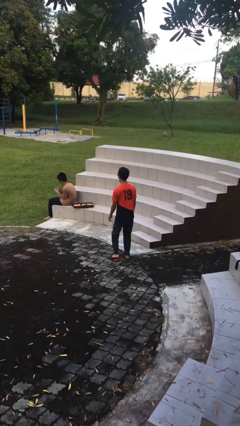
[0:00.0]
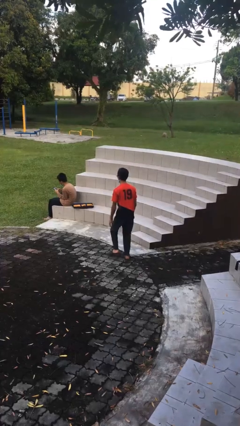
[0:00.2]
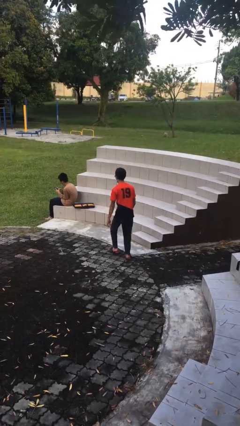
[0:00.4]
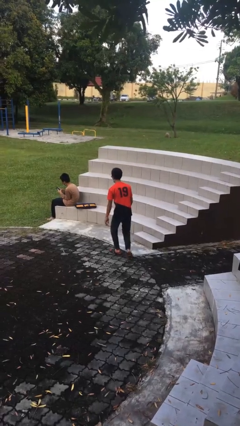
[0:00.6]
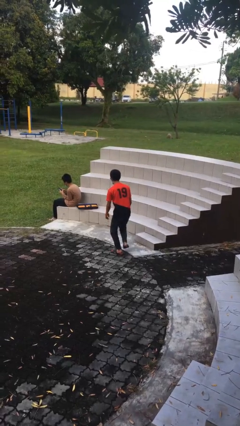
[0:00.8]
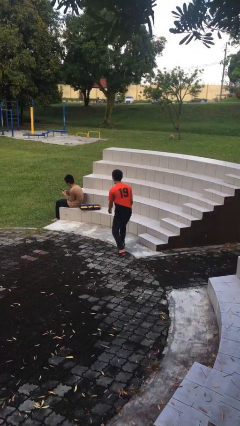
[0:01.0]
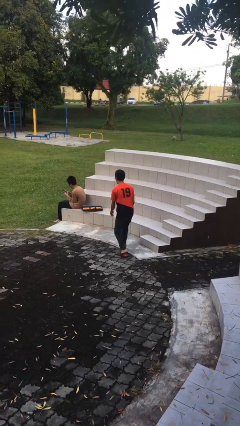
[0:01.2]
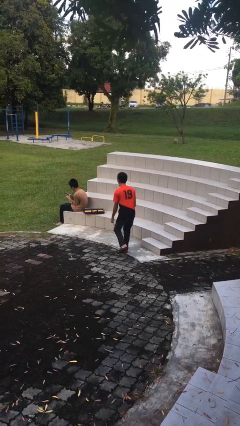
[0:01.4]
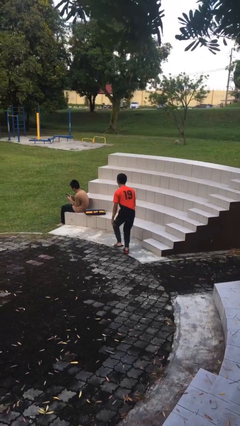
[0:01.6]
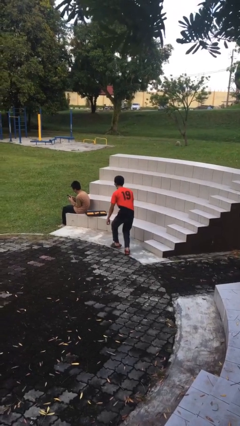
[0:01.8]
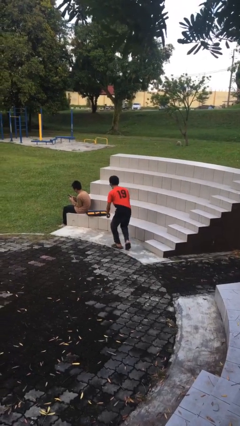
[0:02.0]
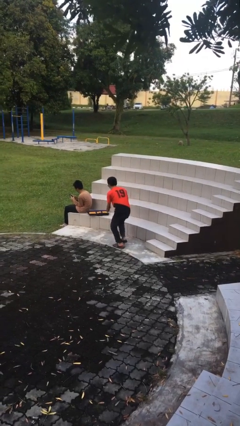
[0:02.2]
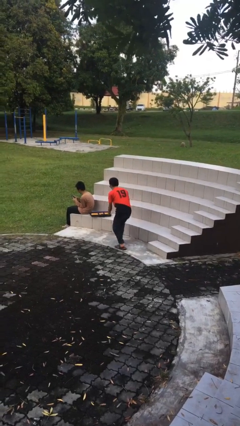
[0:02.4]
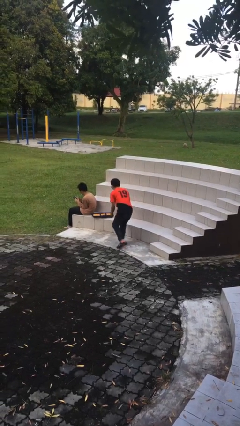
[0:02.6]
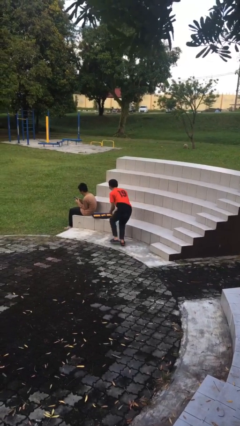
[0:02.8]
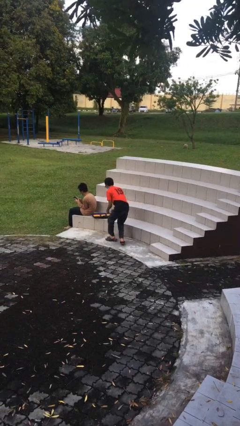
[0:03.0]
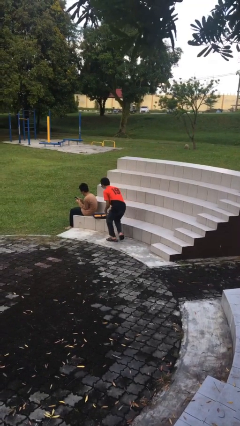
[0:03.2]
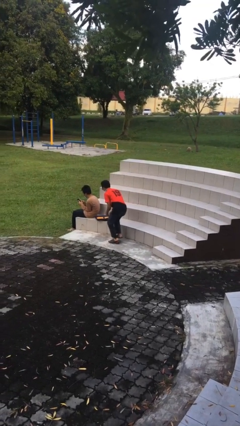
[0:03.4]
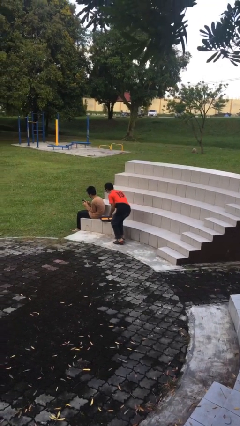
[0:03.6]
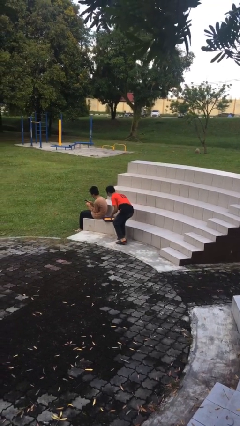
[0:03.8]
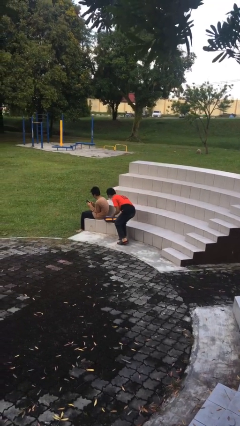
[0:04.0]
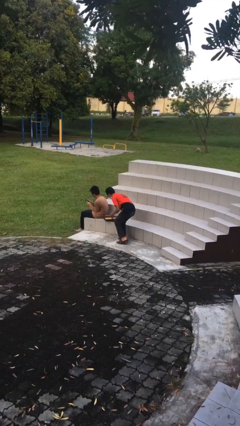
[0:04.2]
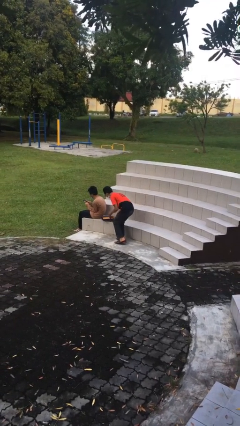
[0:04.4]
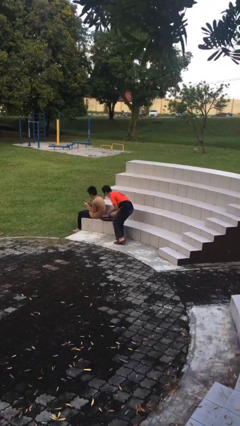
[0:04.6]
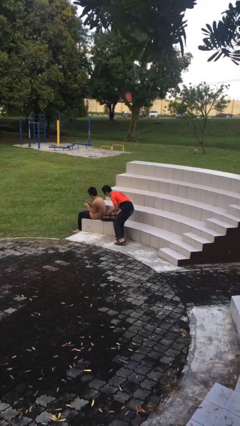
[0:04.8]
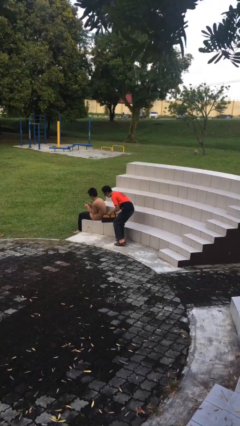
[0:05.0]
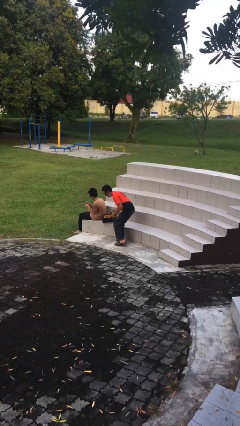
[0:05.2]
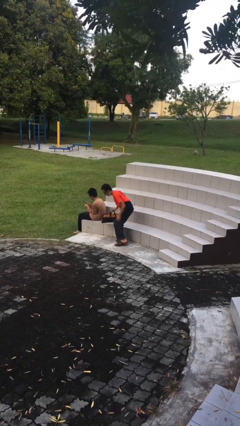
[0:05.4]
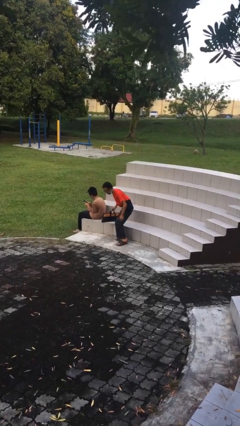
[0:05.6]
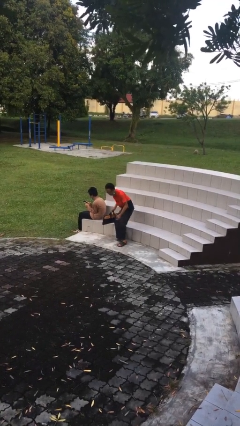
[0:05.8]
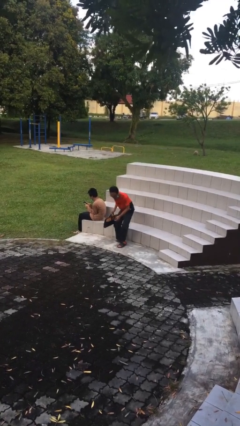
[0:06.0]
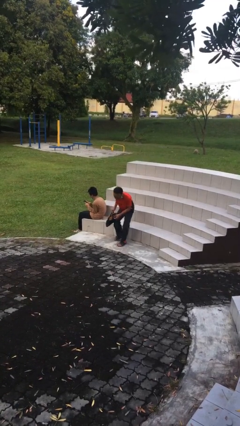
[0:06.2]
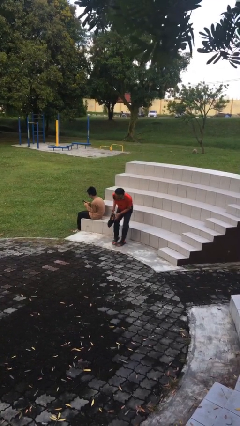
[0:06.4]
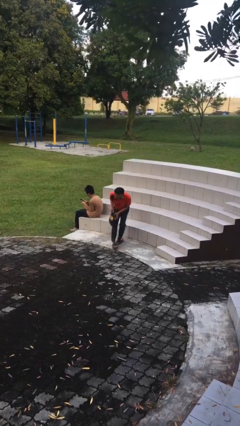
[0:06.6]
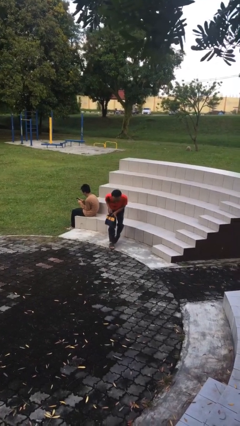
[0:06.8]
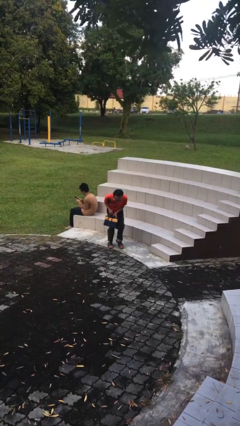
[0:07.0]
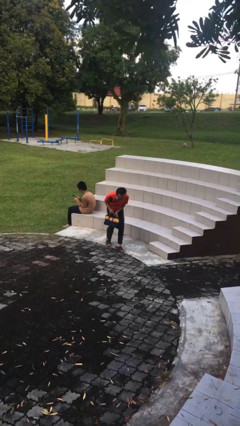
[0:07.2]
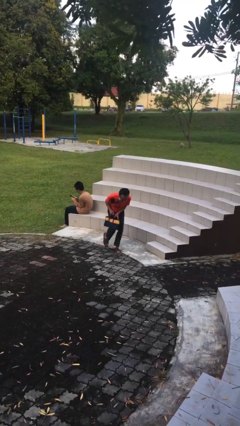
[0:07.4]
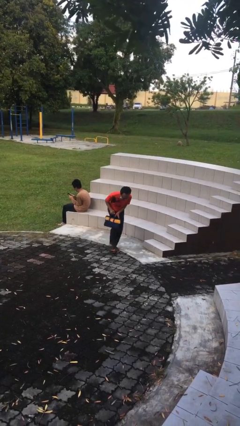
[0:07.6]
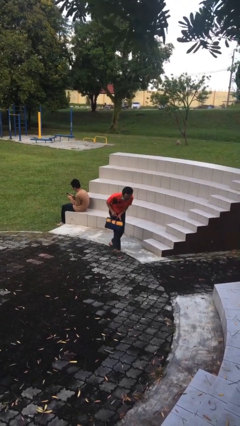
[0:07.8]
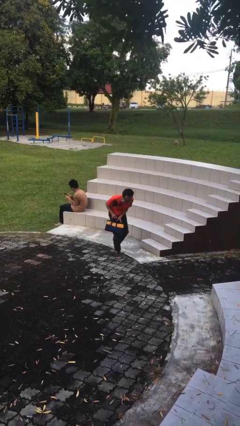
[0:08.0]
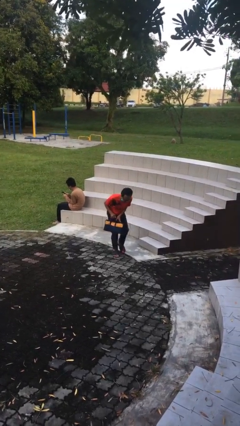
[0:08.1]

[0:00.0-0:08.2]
person steals object from person

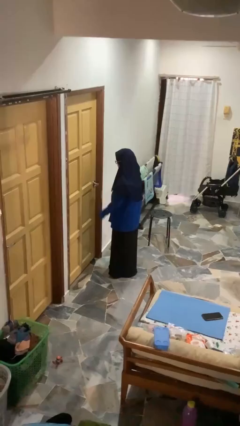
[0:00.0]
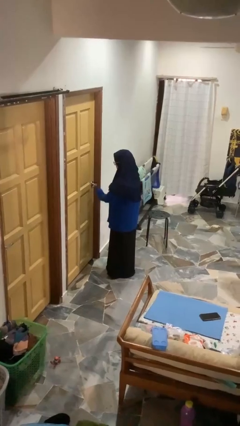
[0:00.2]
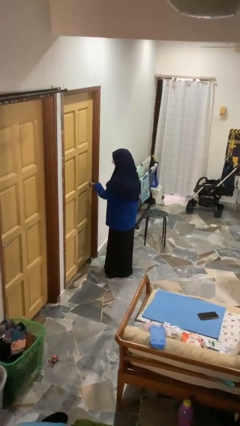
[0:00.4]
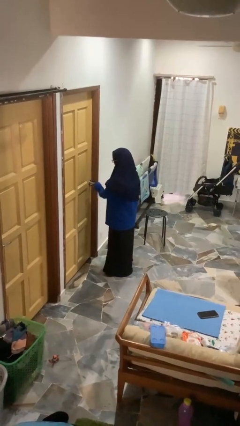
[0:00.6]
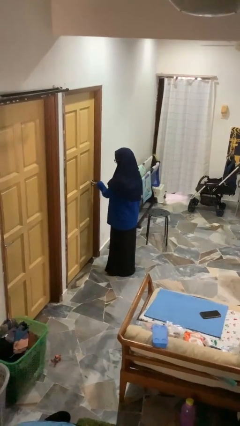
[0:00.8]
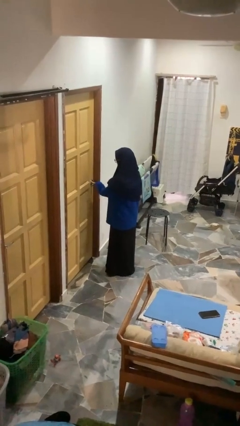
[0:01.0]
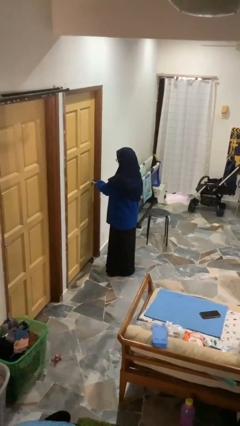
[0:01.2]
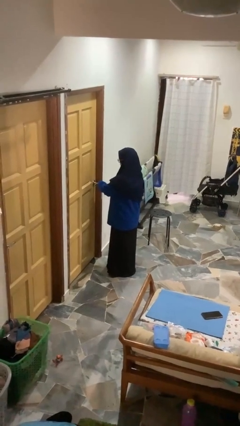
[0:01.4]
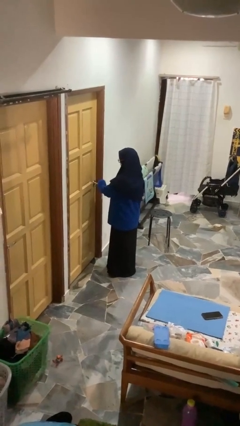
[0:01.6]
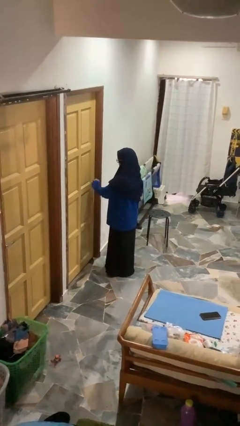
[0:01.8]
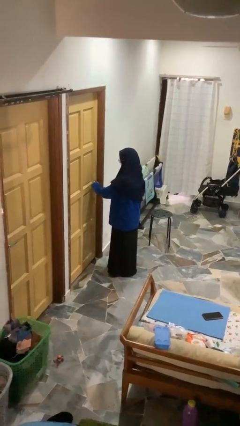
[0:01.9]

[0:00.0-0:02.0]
person unlocks door with keys

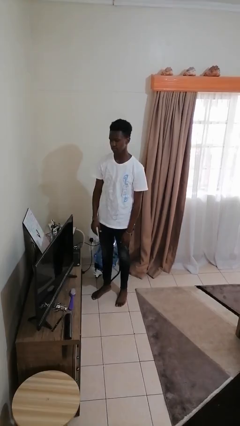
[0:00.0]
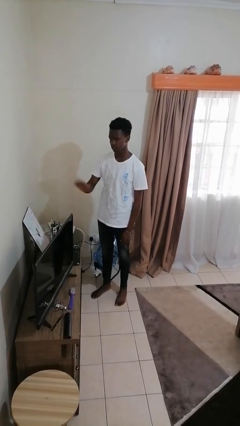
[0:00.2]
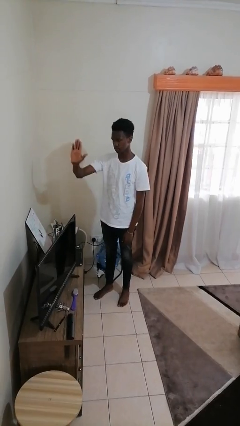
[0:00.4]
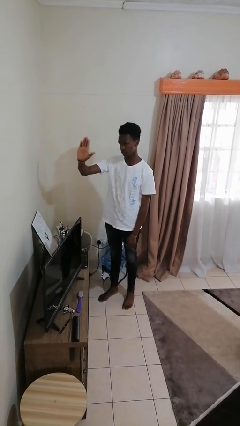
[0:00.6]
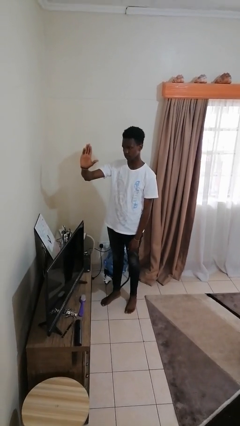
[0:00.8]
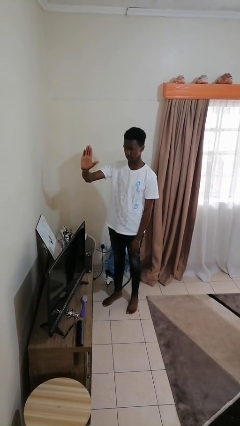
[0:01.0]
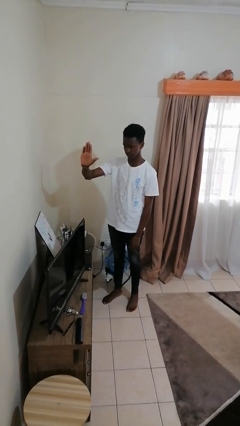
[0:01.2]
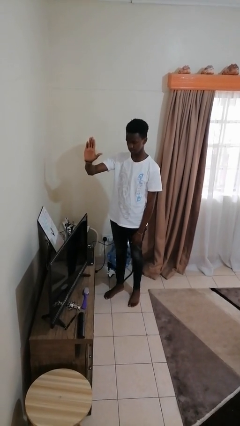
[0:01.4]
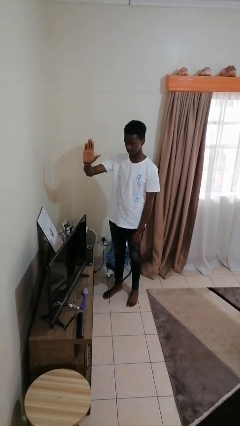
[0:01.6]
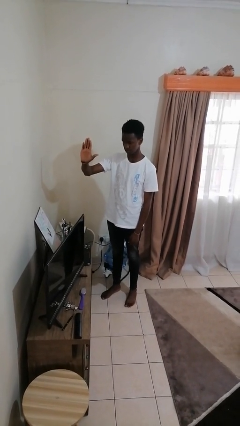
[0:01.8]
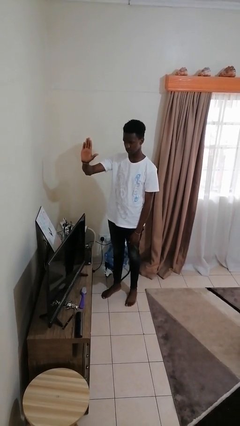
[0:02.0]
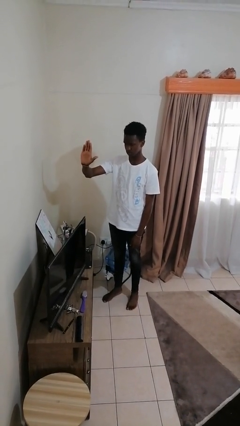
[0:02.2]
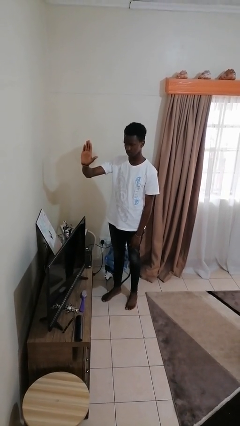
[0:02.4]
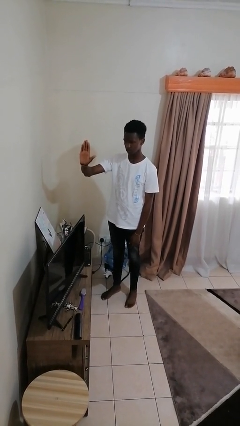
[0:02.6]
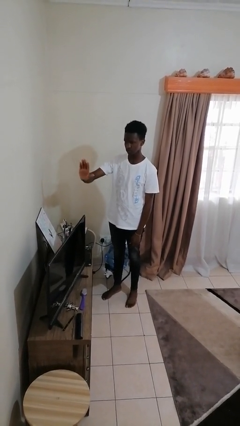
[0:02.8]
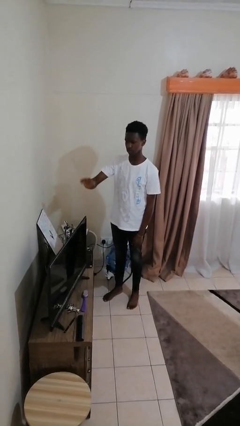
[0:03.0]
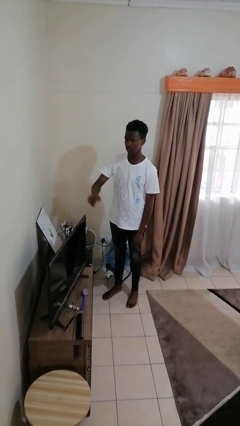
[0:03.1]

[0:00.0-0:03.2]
person gestures stop

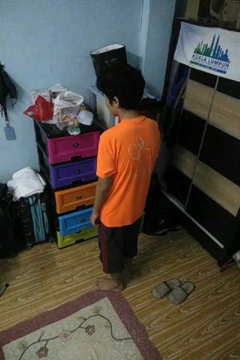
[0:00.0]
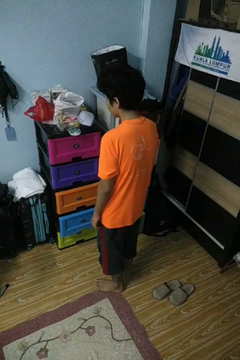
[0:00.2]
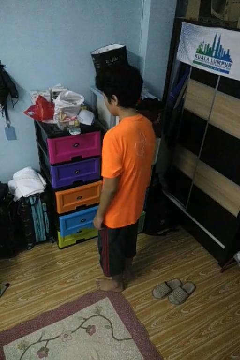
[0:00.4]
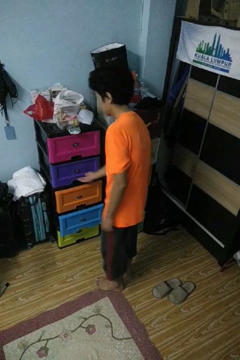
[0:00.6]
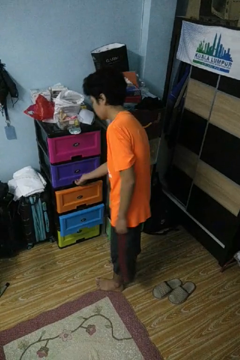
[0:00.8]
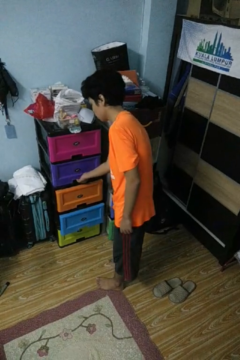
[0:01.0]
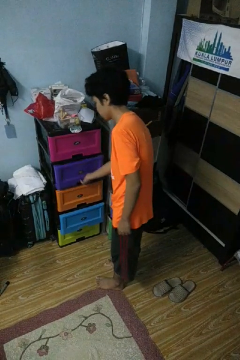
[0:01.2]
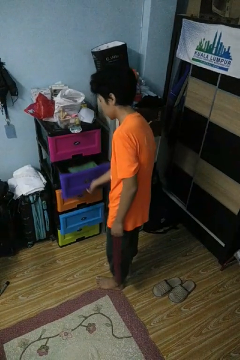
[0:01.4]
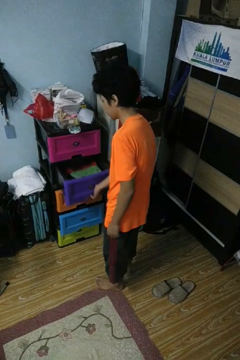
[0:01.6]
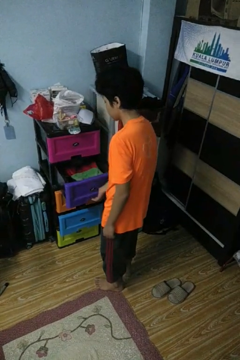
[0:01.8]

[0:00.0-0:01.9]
person opens dresser drawer

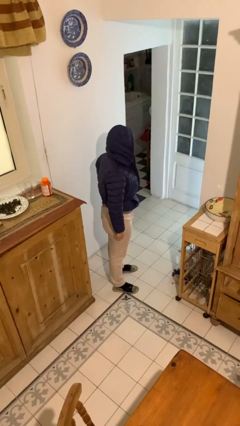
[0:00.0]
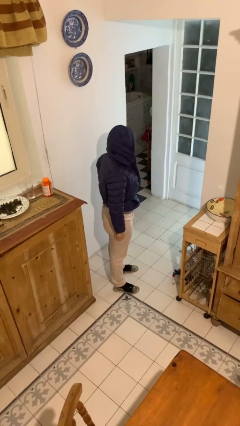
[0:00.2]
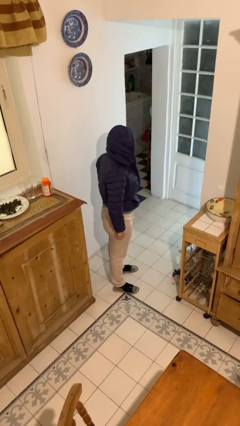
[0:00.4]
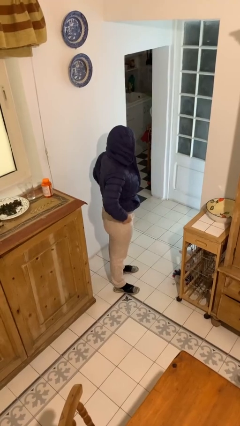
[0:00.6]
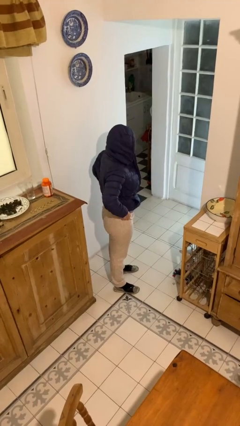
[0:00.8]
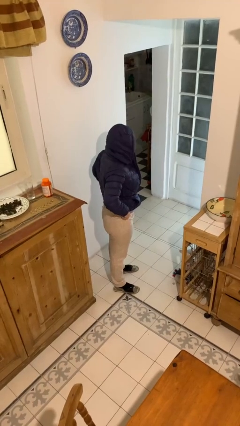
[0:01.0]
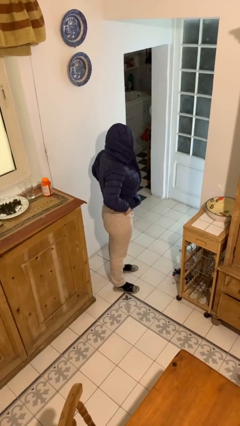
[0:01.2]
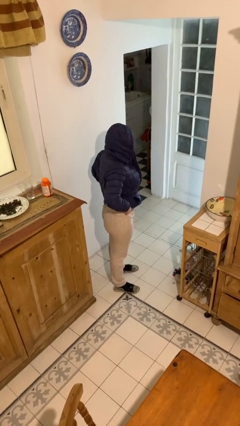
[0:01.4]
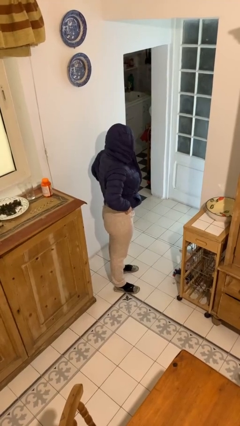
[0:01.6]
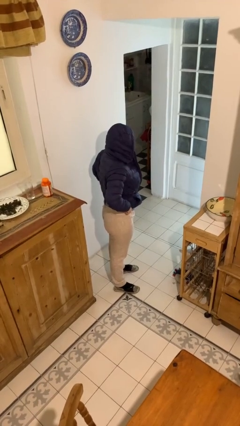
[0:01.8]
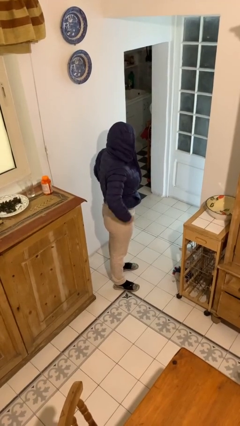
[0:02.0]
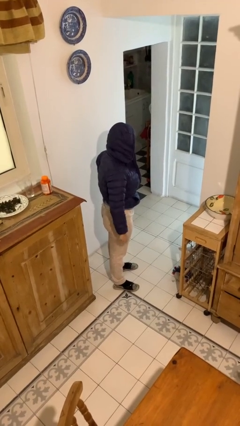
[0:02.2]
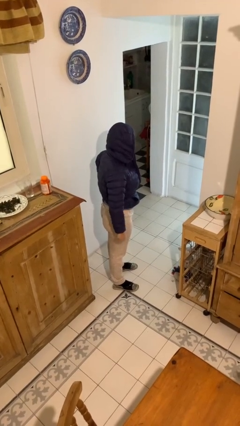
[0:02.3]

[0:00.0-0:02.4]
person hikes up pants

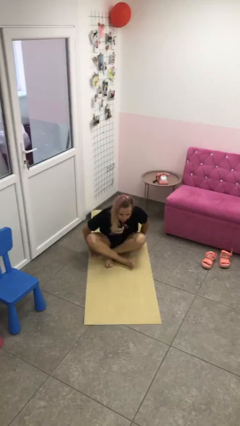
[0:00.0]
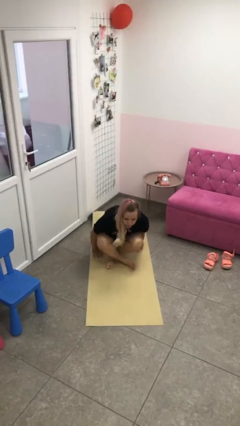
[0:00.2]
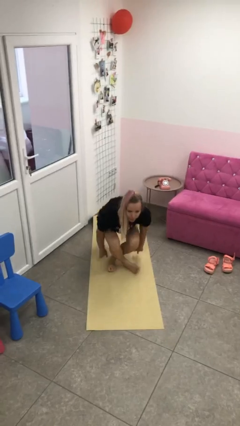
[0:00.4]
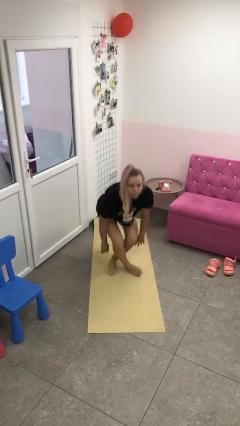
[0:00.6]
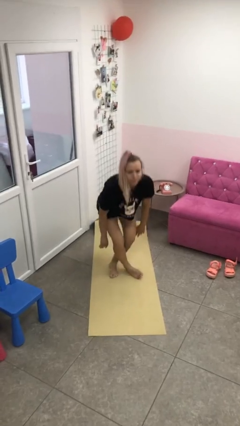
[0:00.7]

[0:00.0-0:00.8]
person stands up from floor
